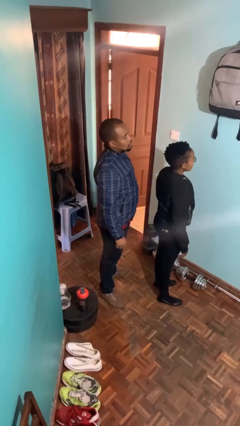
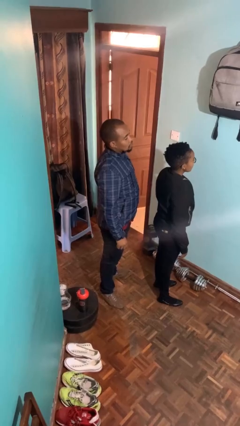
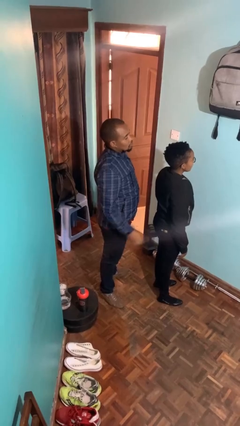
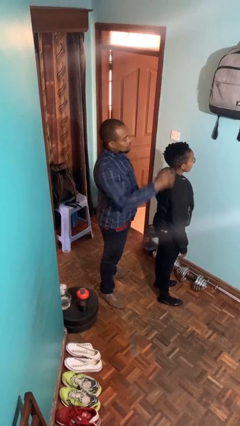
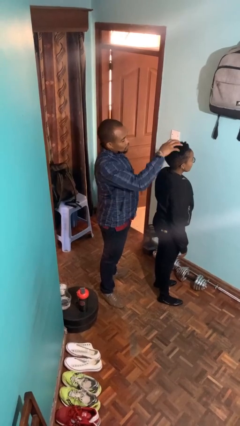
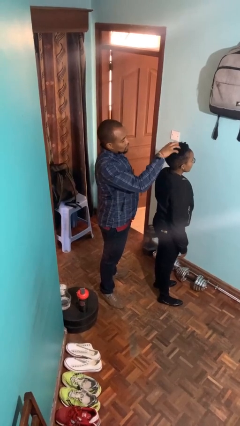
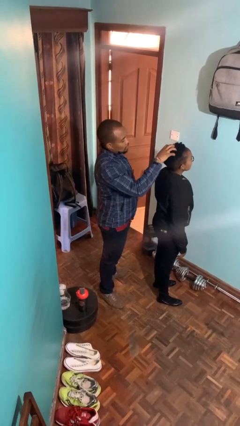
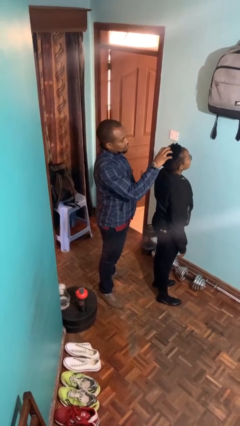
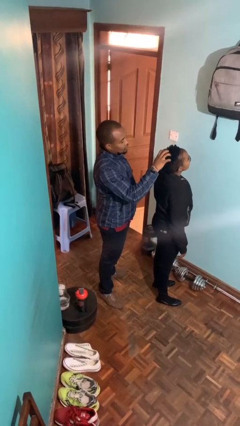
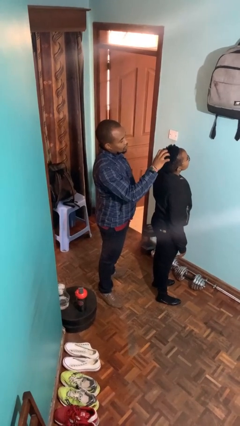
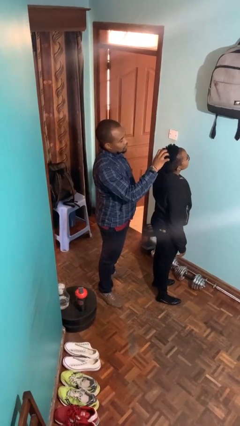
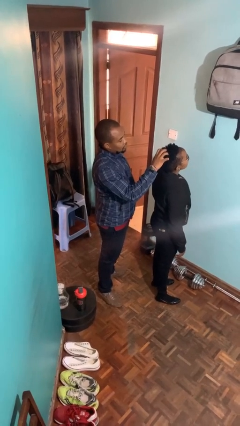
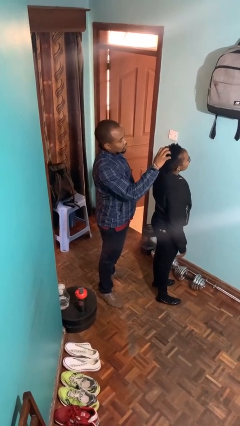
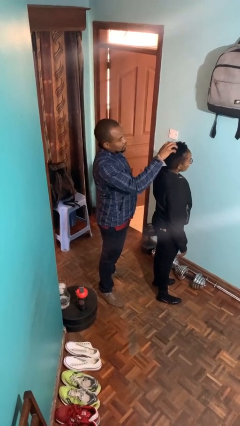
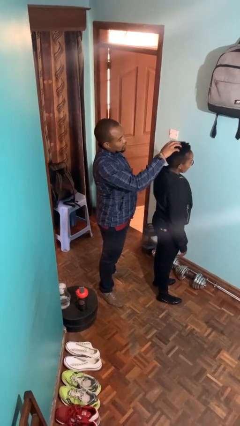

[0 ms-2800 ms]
person grabs person by hair

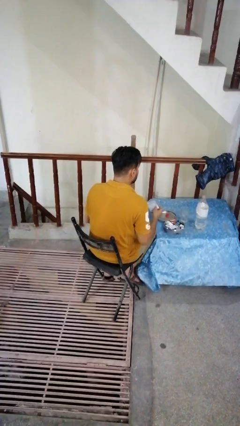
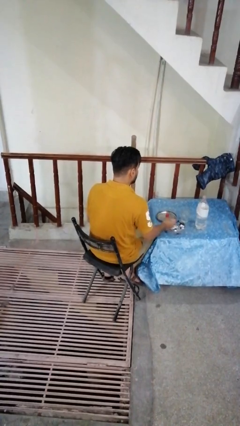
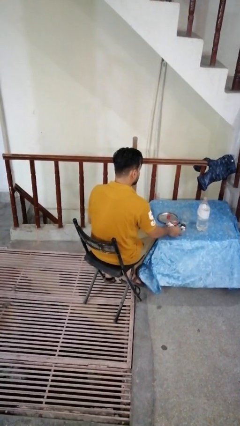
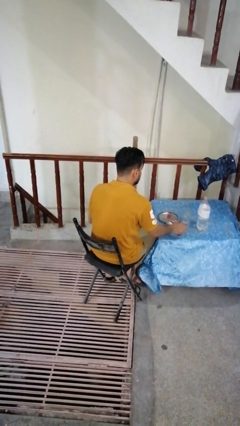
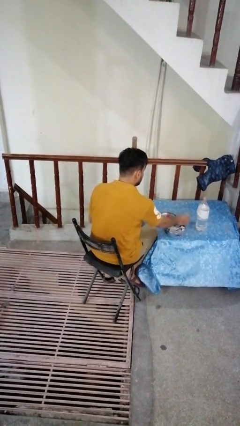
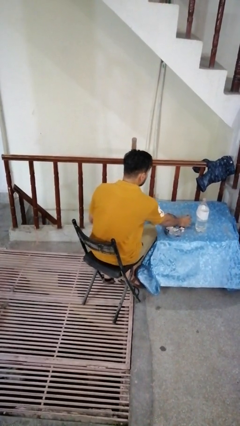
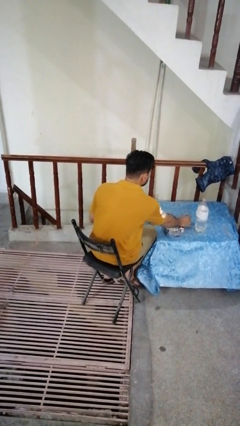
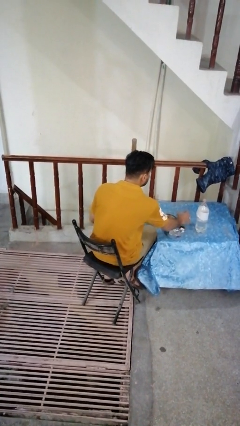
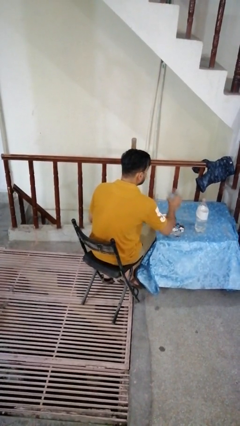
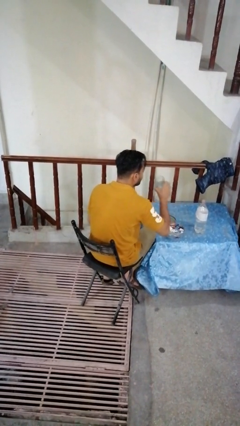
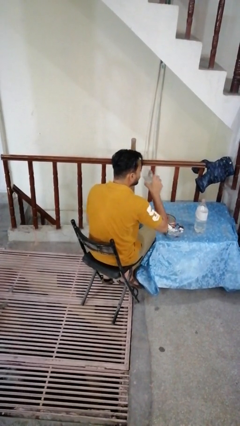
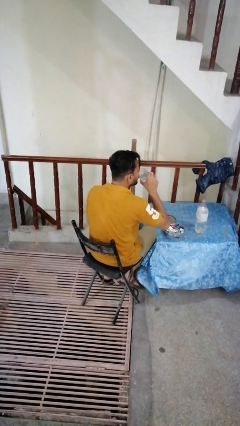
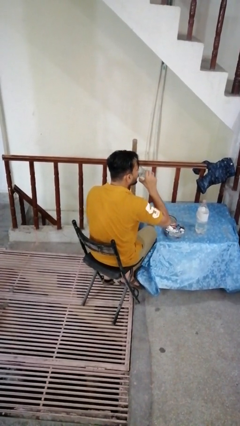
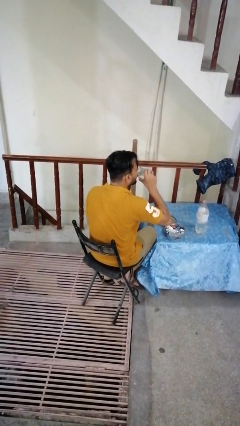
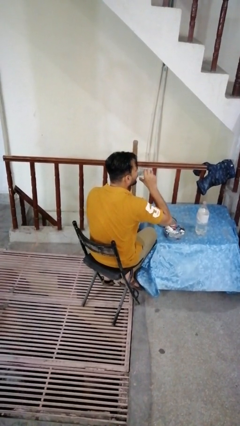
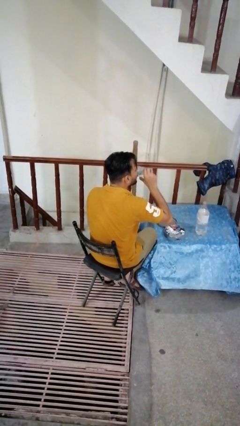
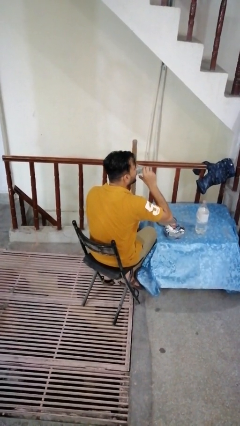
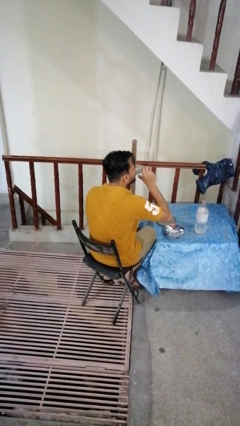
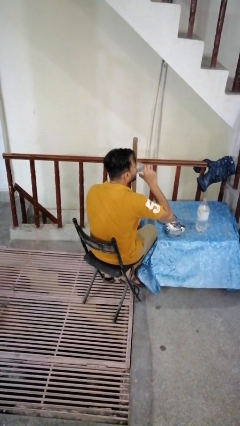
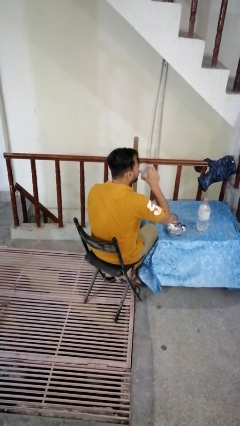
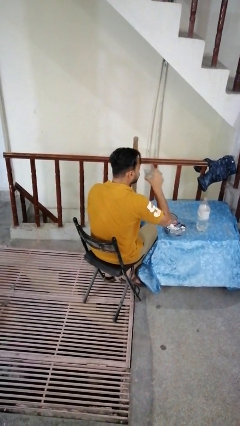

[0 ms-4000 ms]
person drinks from cup

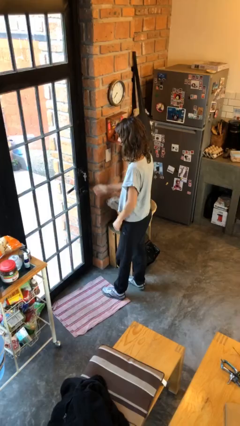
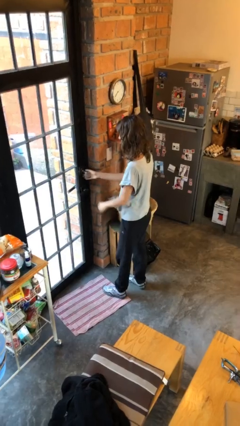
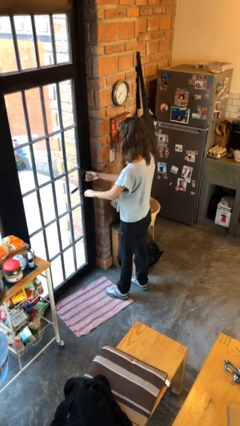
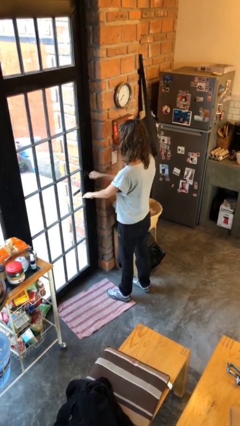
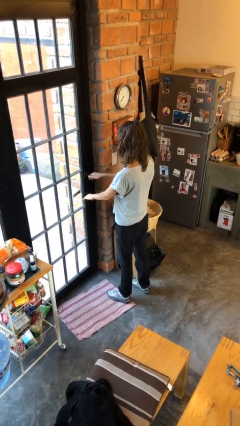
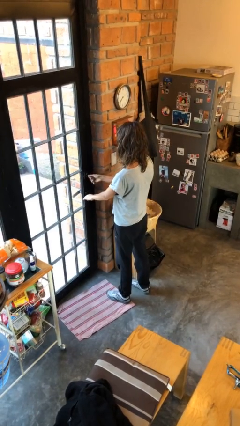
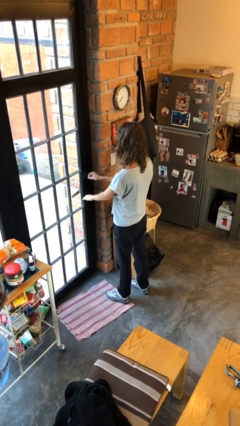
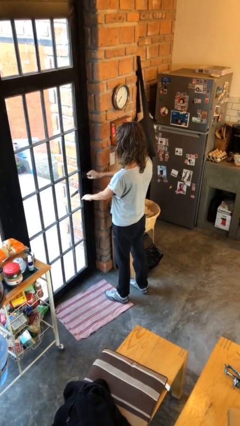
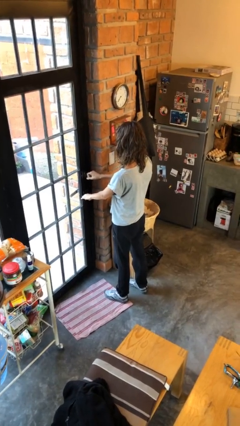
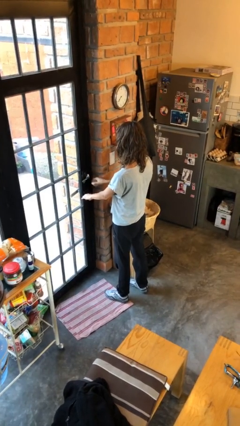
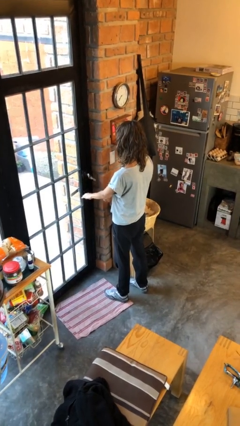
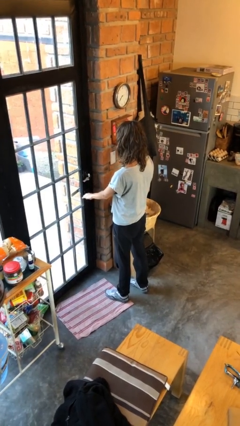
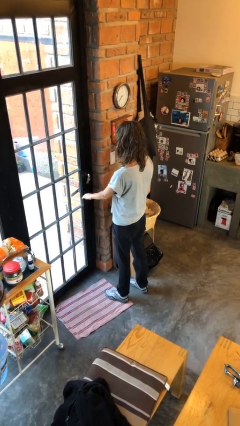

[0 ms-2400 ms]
person unlocks door with keys

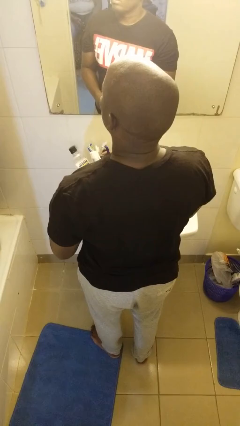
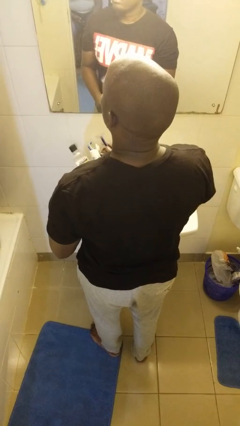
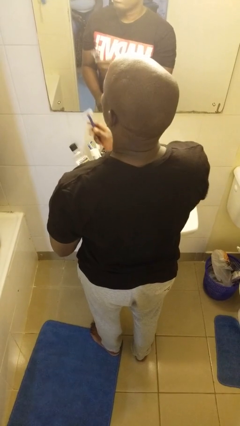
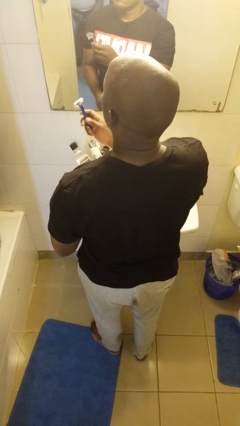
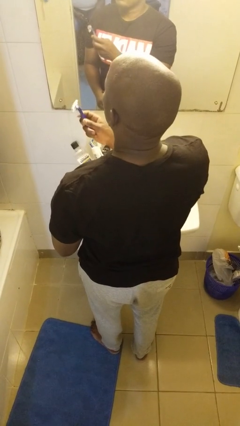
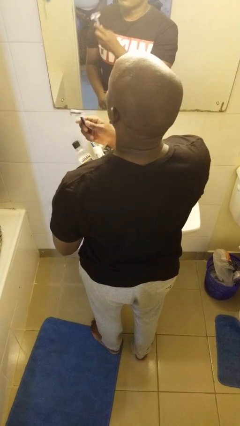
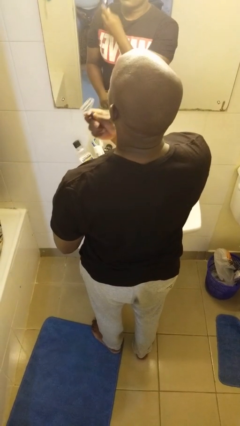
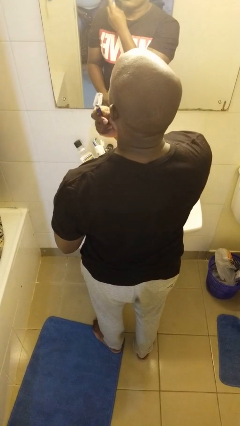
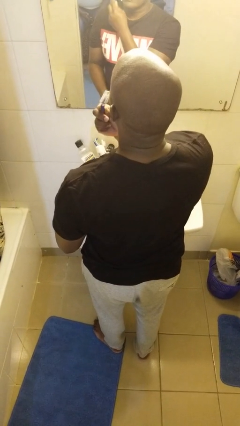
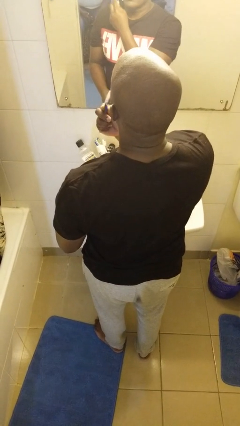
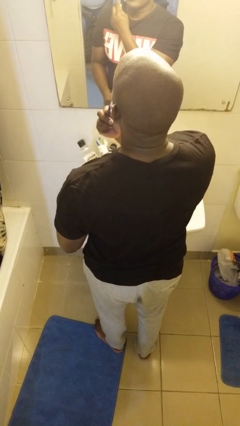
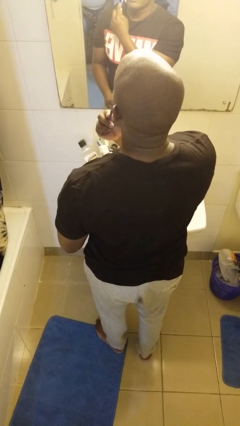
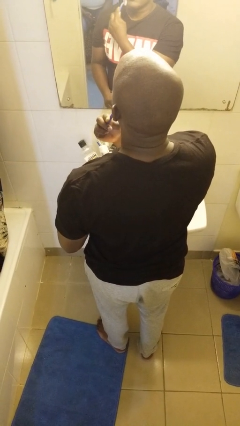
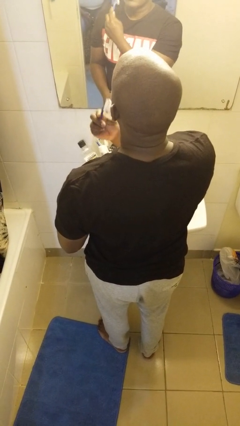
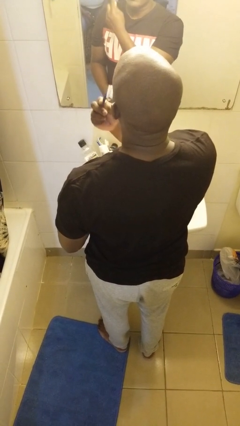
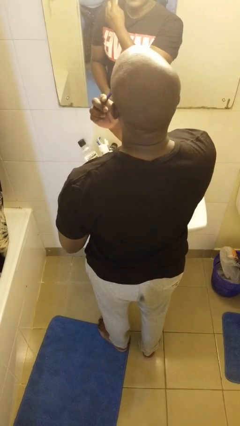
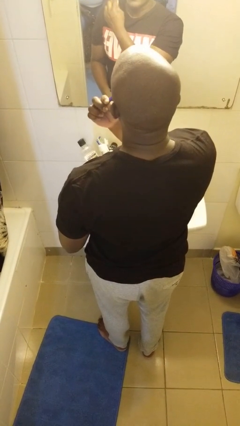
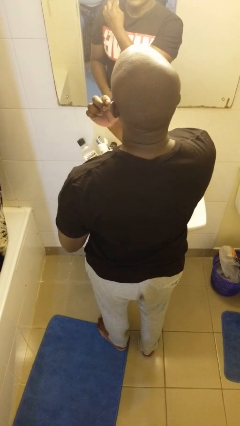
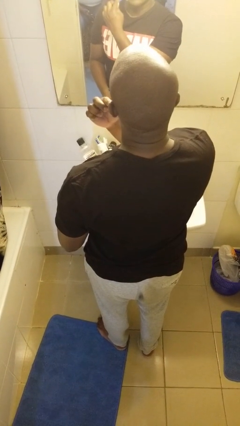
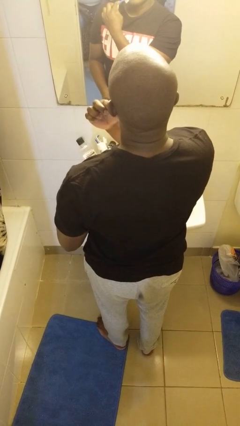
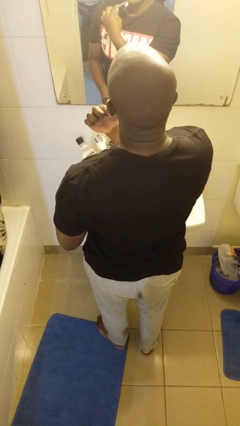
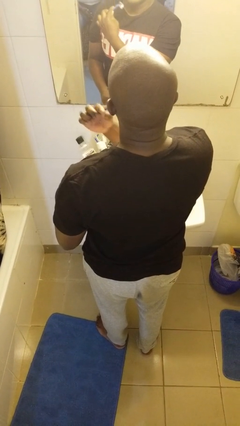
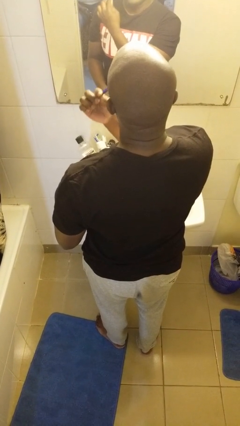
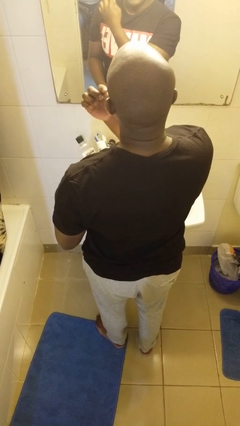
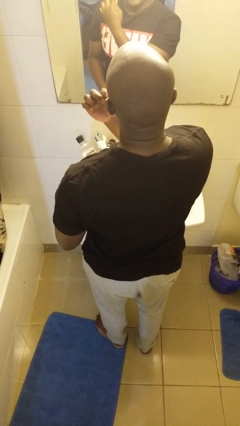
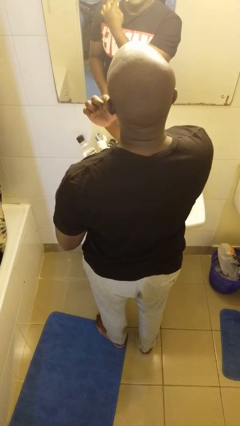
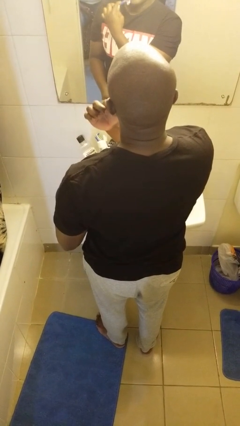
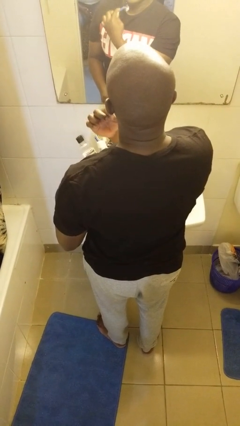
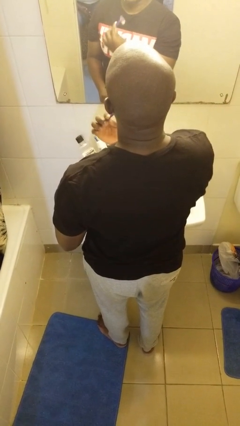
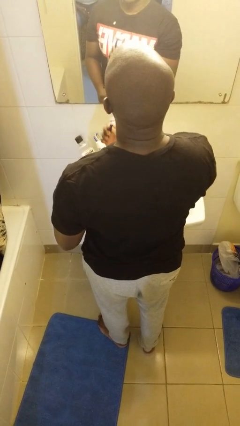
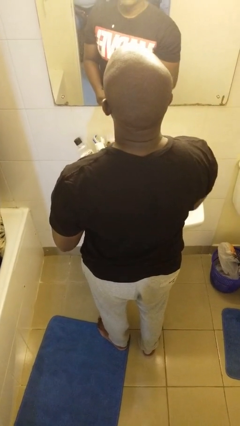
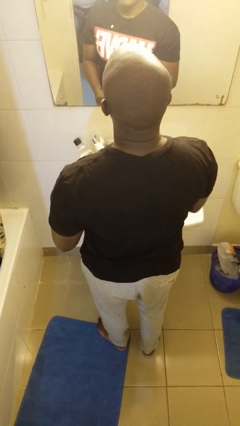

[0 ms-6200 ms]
person shaves face

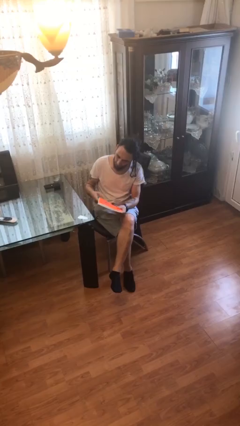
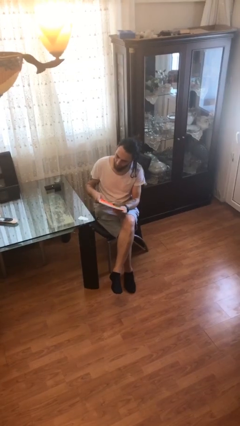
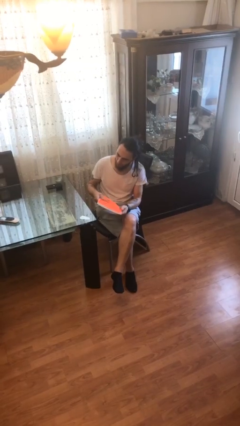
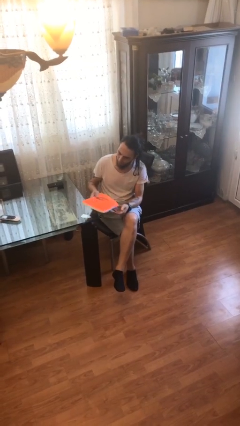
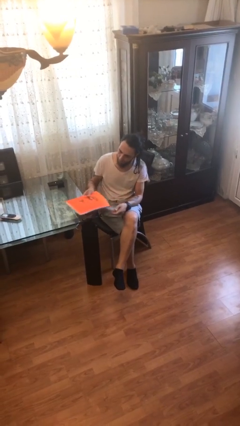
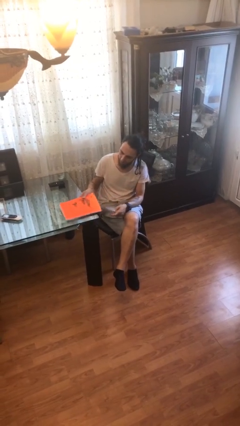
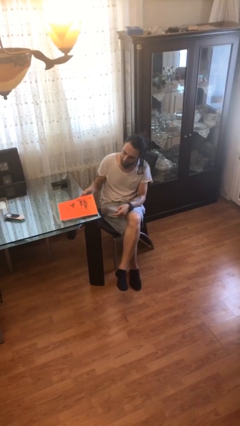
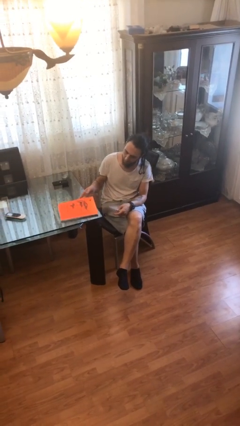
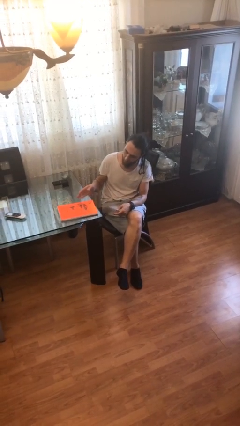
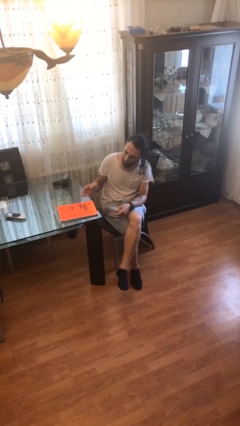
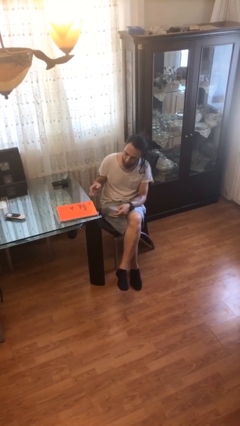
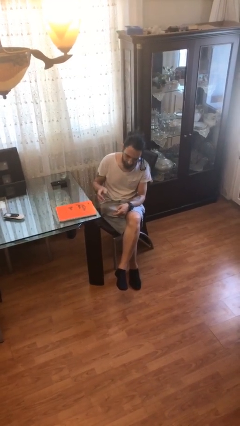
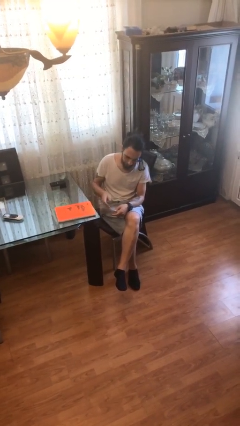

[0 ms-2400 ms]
person puts down object on table
